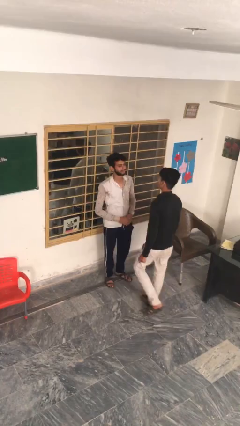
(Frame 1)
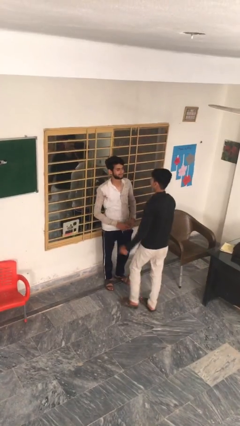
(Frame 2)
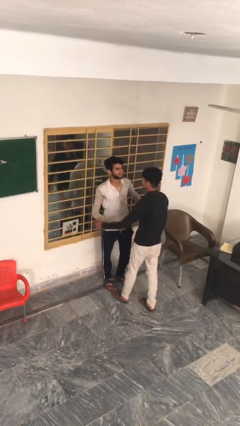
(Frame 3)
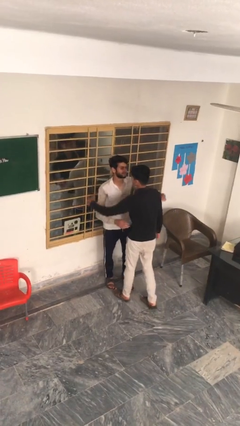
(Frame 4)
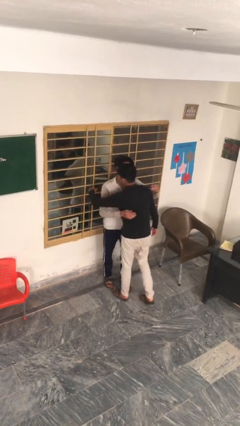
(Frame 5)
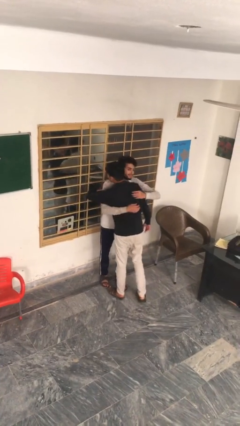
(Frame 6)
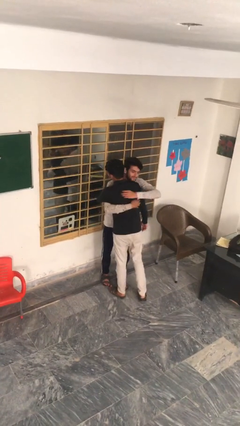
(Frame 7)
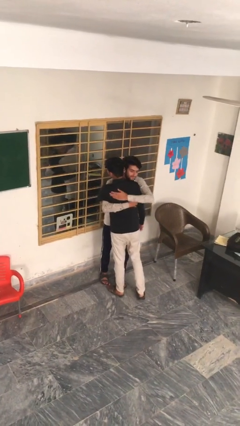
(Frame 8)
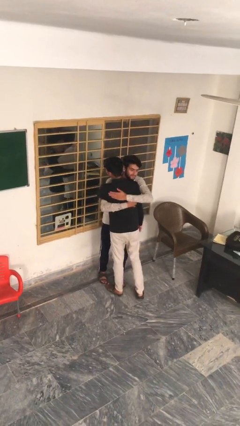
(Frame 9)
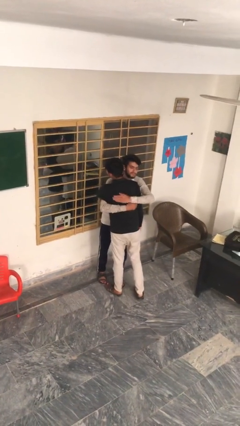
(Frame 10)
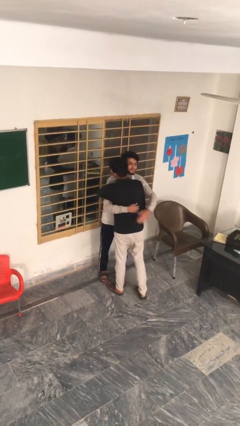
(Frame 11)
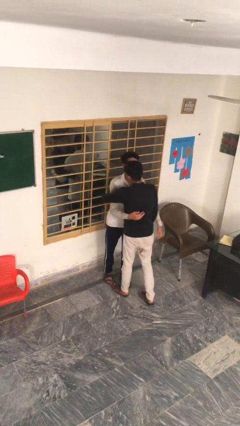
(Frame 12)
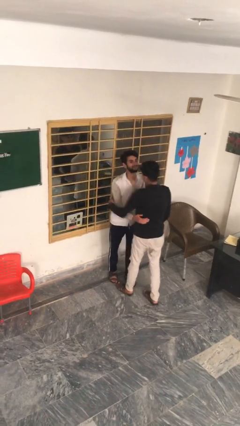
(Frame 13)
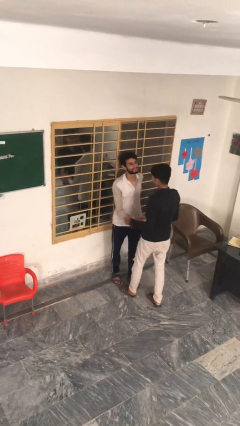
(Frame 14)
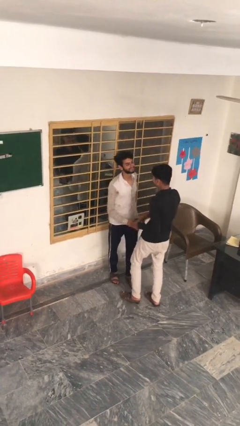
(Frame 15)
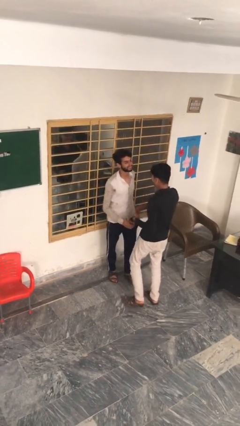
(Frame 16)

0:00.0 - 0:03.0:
person embraces person

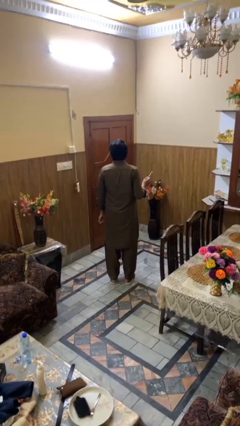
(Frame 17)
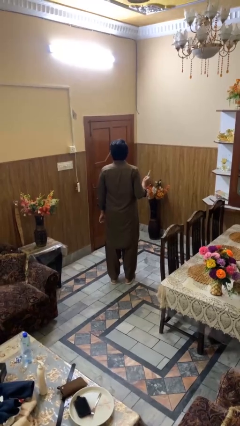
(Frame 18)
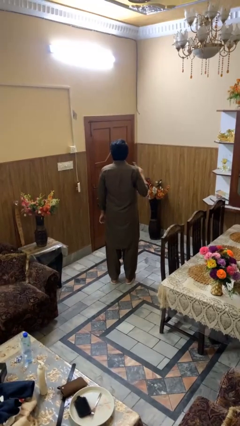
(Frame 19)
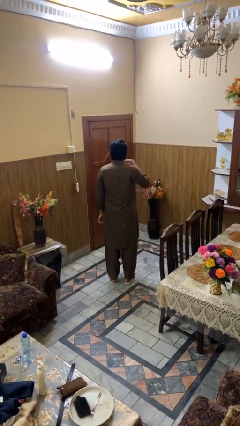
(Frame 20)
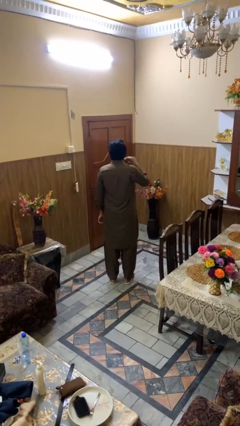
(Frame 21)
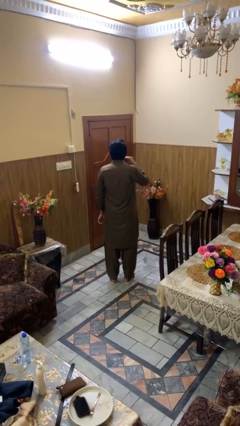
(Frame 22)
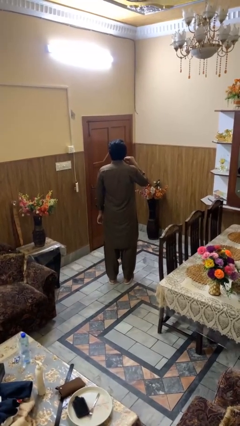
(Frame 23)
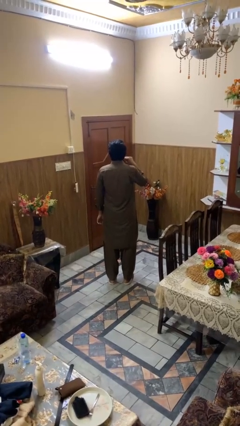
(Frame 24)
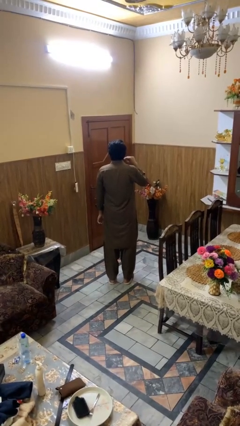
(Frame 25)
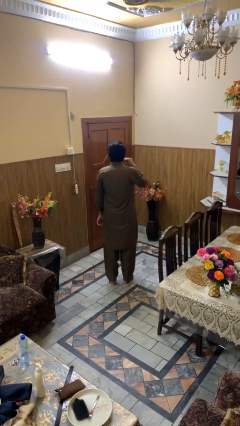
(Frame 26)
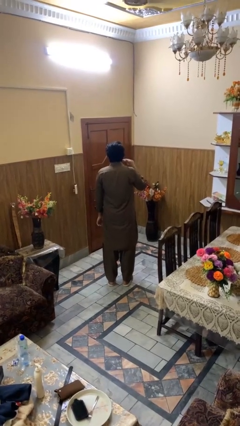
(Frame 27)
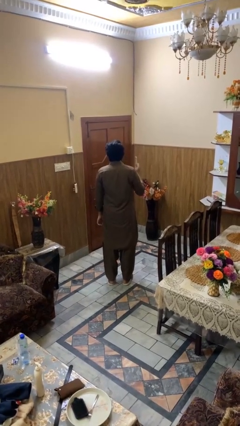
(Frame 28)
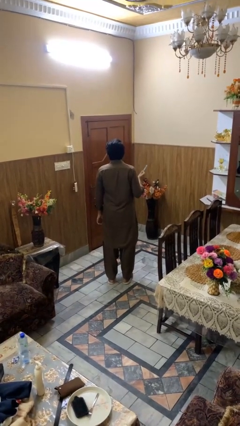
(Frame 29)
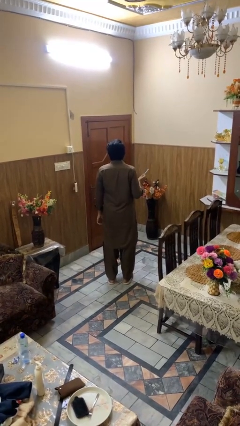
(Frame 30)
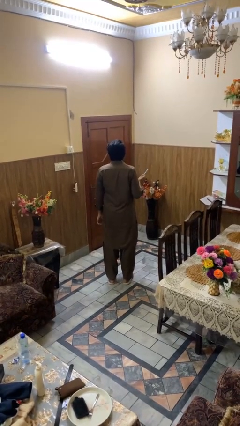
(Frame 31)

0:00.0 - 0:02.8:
person brushes teeth

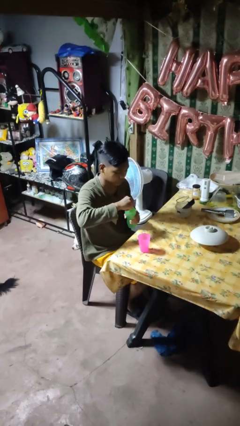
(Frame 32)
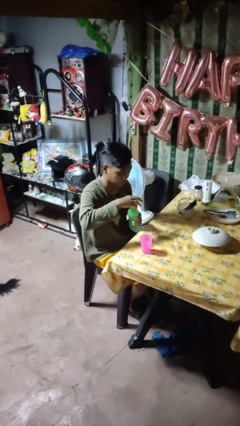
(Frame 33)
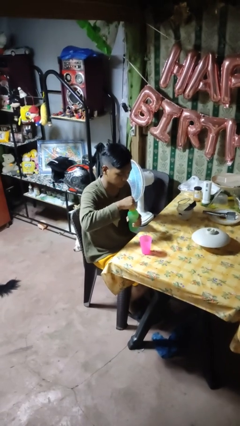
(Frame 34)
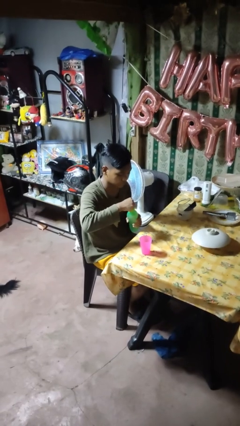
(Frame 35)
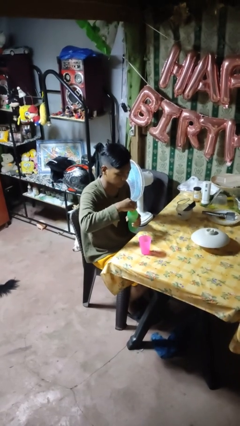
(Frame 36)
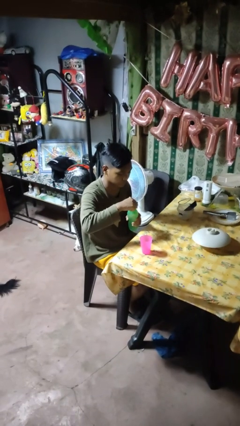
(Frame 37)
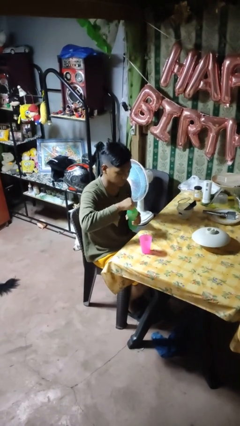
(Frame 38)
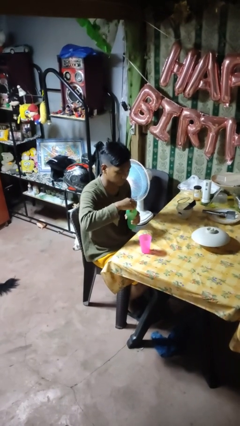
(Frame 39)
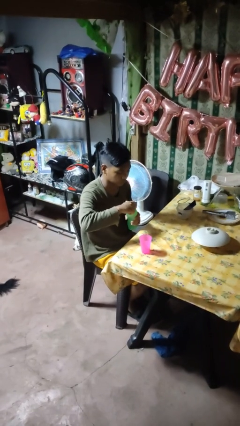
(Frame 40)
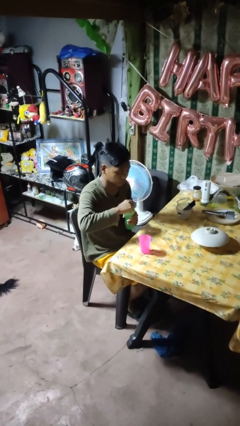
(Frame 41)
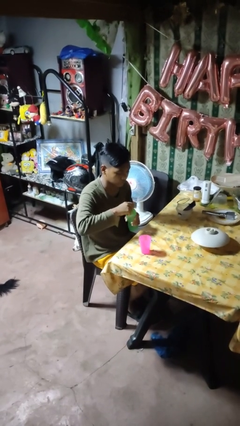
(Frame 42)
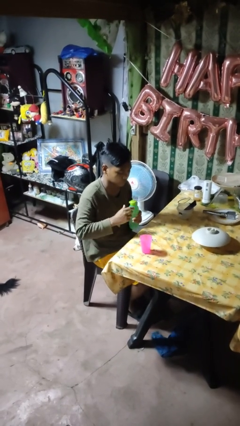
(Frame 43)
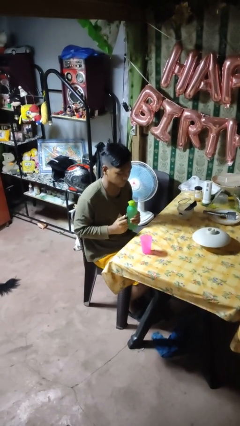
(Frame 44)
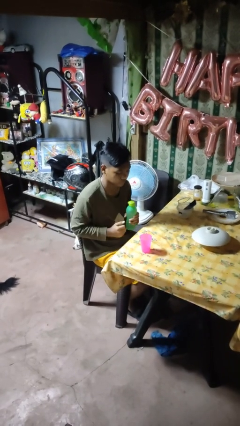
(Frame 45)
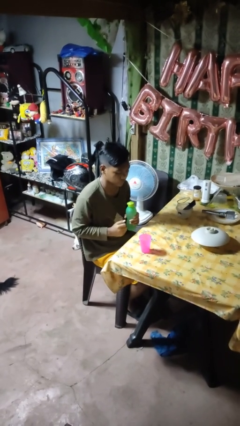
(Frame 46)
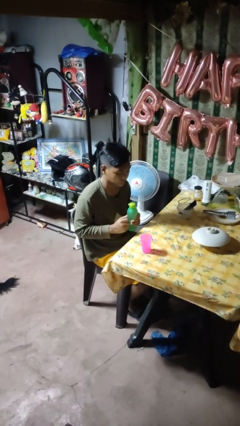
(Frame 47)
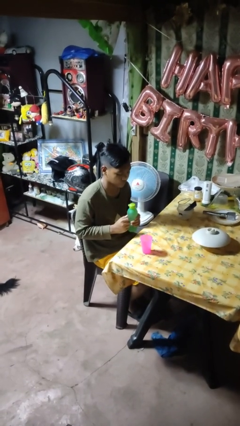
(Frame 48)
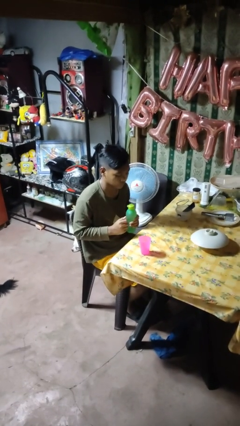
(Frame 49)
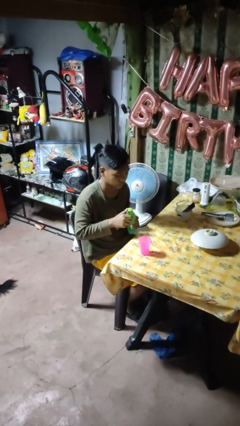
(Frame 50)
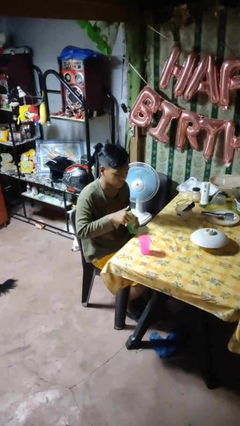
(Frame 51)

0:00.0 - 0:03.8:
person screws lid to bottle

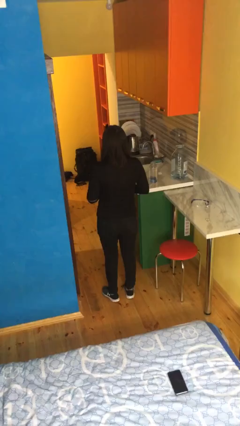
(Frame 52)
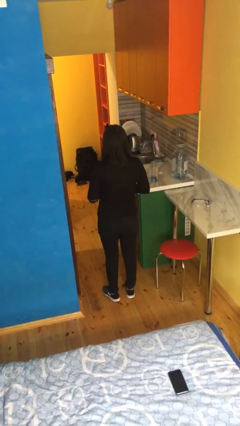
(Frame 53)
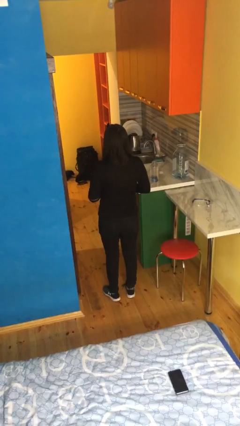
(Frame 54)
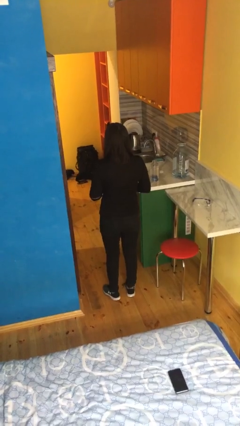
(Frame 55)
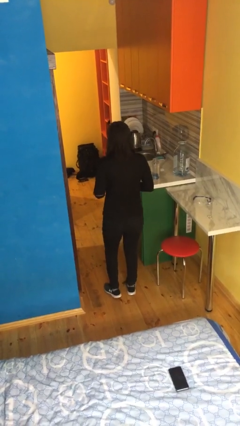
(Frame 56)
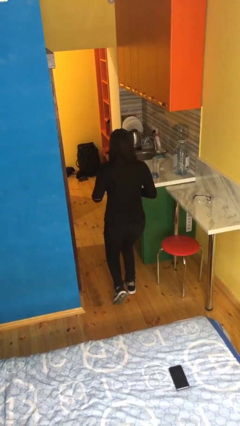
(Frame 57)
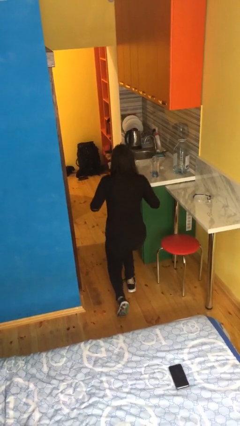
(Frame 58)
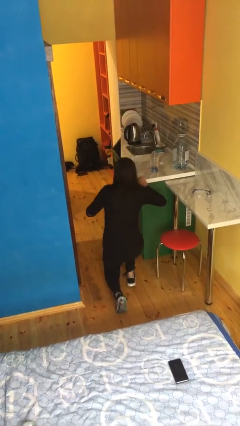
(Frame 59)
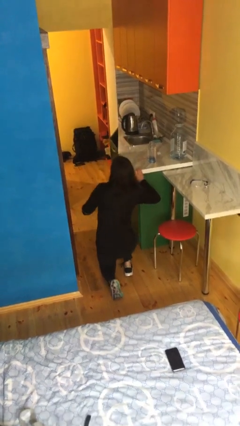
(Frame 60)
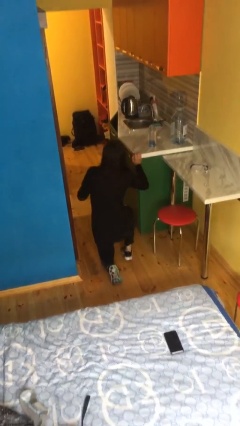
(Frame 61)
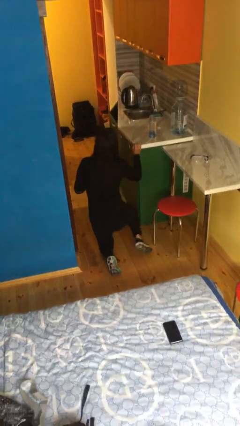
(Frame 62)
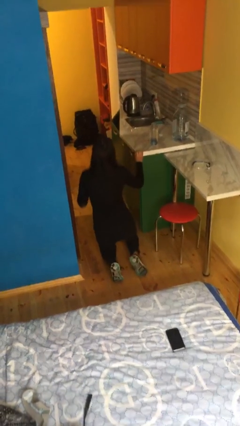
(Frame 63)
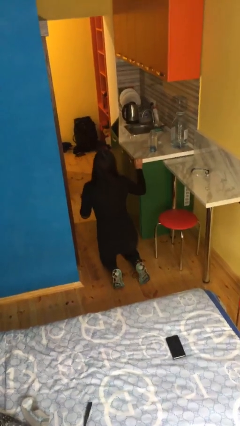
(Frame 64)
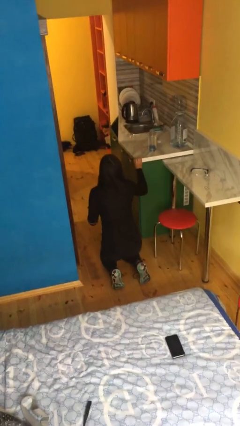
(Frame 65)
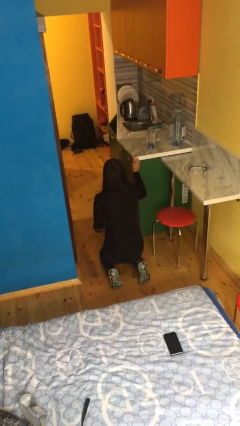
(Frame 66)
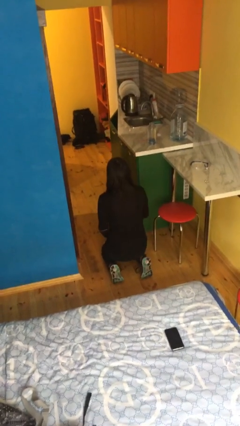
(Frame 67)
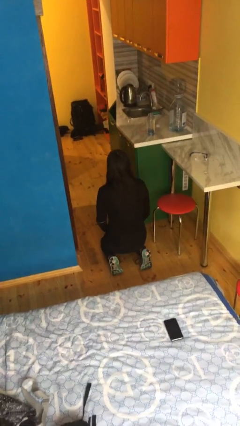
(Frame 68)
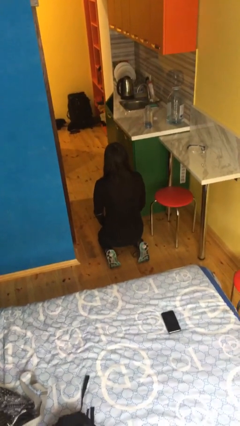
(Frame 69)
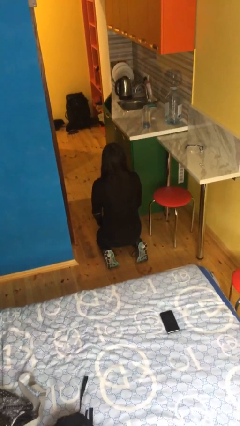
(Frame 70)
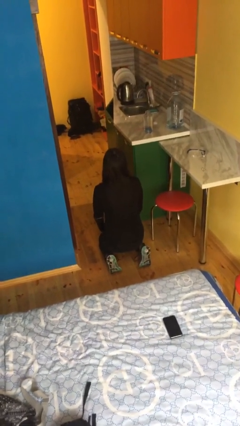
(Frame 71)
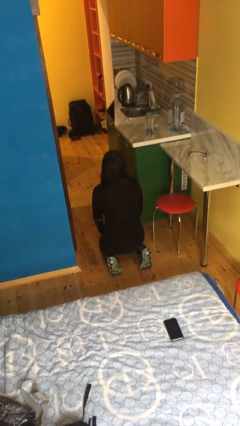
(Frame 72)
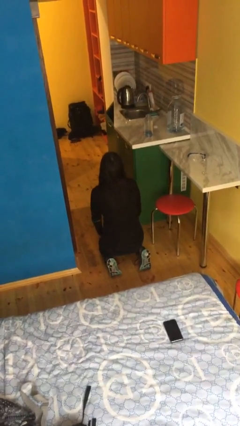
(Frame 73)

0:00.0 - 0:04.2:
person kneels

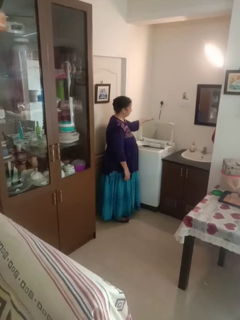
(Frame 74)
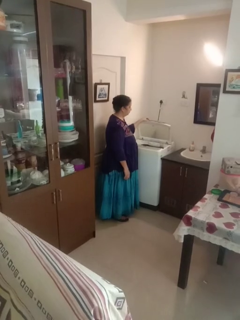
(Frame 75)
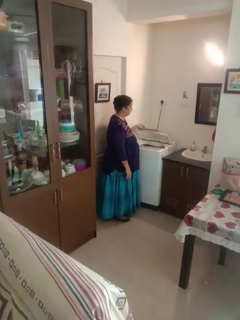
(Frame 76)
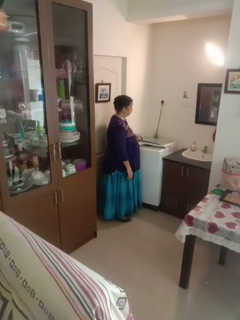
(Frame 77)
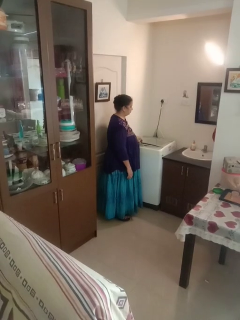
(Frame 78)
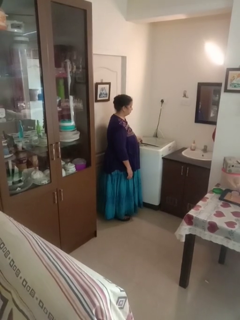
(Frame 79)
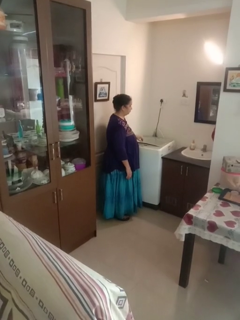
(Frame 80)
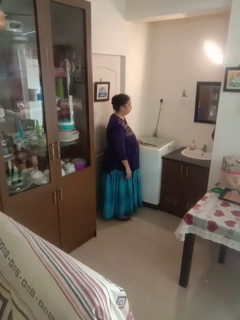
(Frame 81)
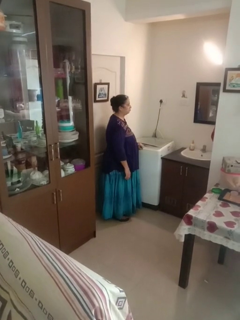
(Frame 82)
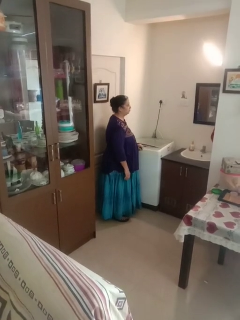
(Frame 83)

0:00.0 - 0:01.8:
person closes clothes washer

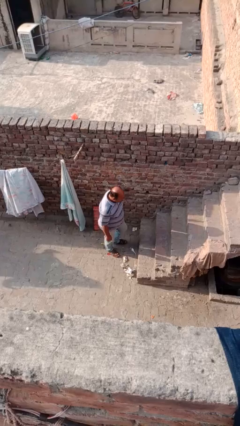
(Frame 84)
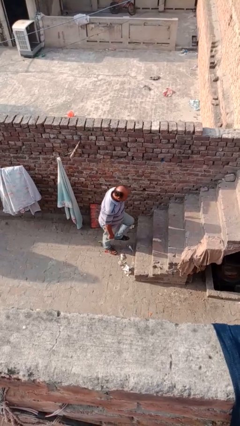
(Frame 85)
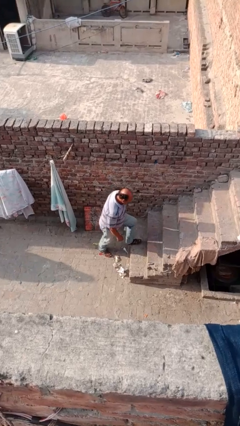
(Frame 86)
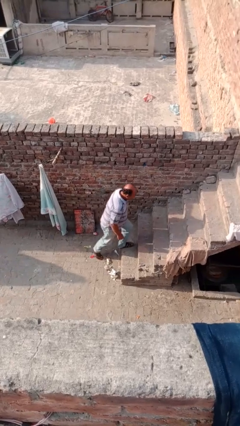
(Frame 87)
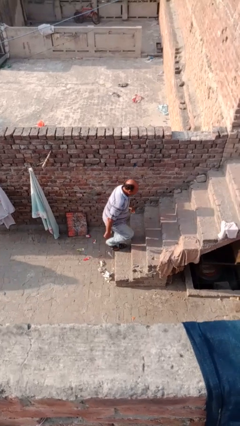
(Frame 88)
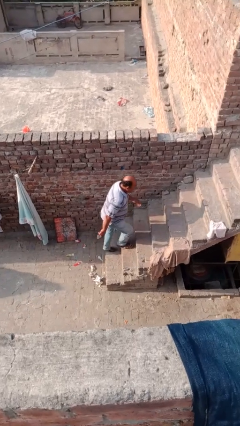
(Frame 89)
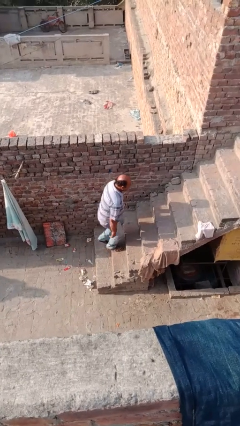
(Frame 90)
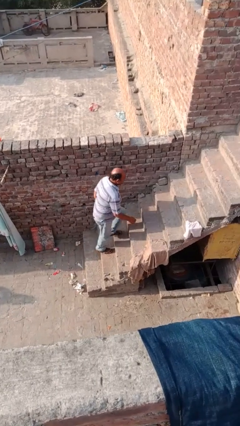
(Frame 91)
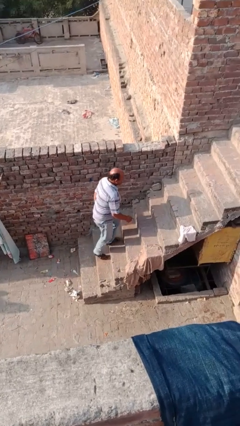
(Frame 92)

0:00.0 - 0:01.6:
person climbs up stairs

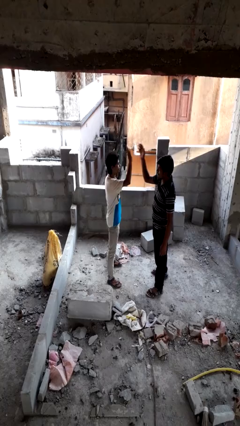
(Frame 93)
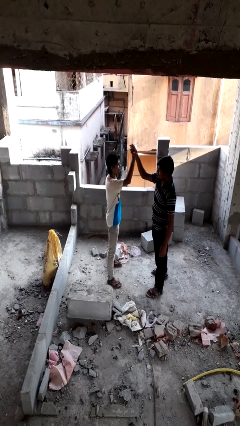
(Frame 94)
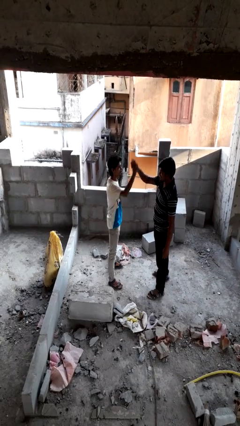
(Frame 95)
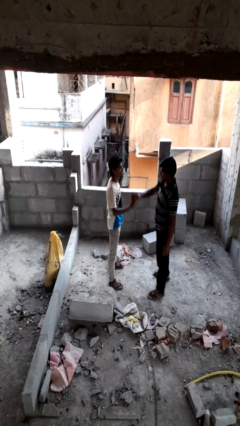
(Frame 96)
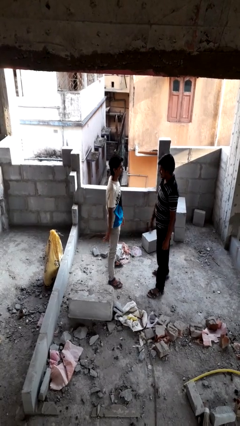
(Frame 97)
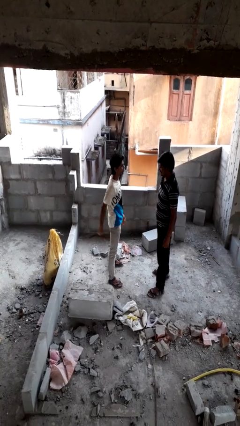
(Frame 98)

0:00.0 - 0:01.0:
person highfives hand
